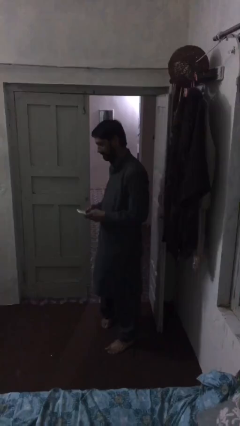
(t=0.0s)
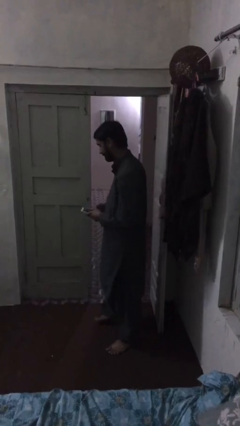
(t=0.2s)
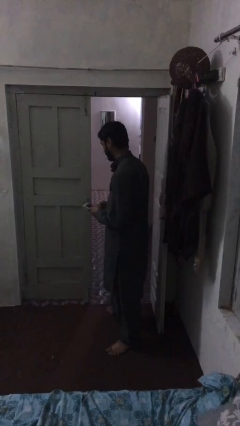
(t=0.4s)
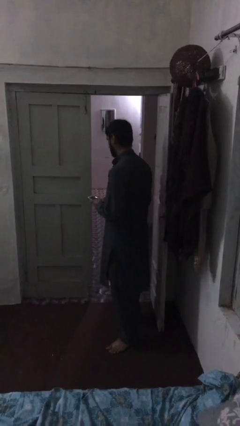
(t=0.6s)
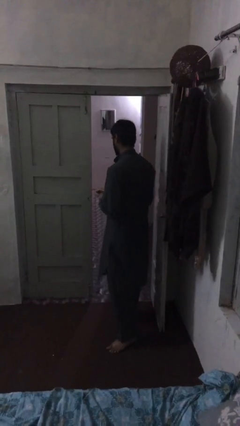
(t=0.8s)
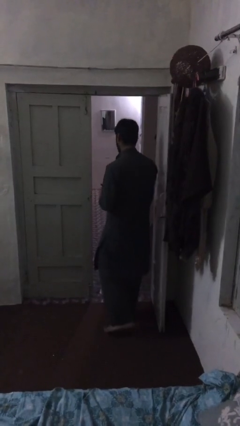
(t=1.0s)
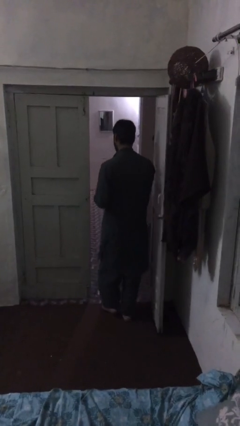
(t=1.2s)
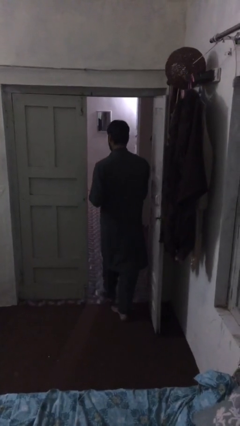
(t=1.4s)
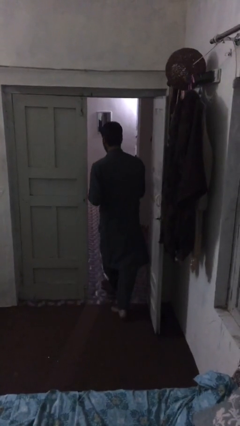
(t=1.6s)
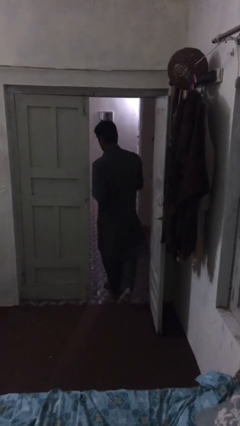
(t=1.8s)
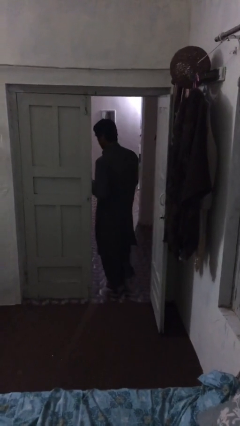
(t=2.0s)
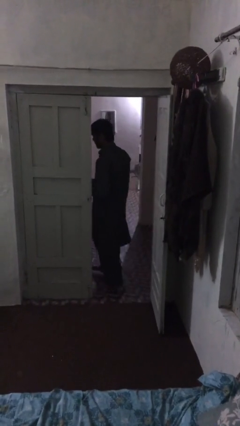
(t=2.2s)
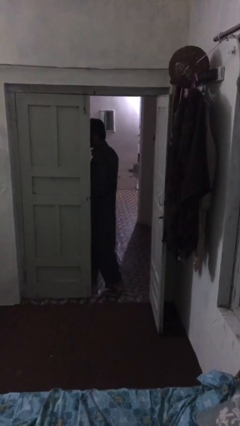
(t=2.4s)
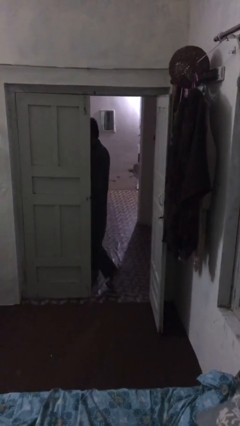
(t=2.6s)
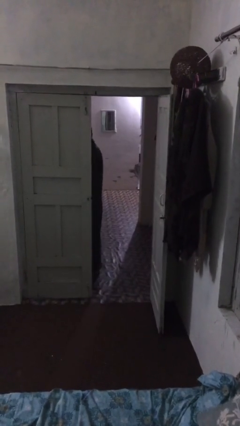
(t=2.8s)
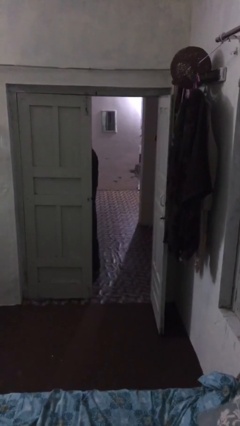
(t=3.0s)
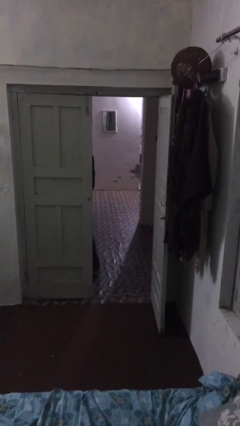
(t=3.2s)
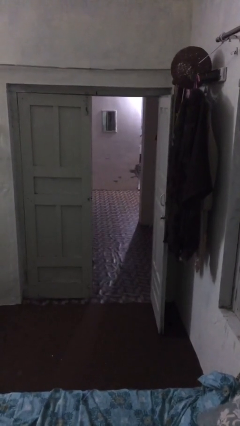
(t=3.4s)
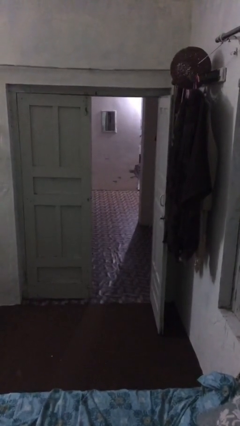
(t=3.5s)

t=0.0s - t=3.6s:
person exits scene through structure

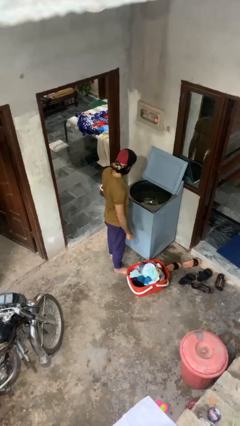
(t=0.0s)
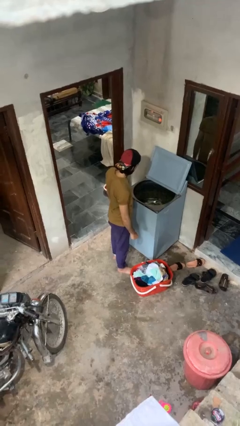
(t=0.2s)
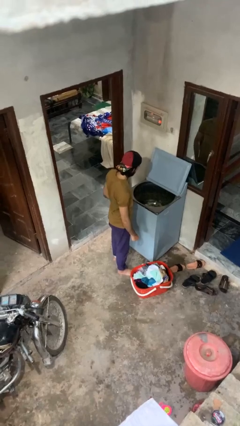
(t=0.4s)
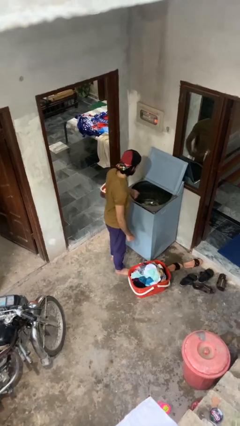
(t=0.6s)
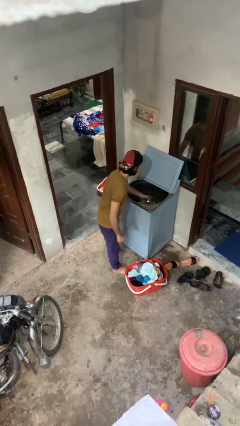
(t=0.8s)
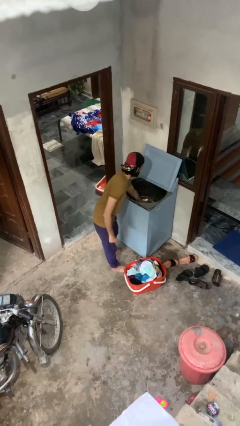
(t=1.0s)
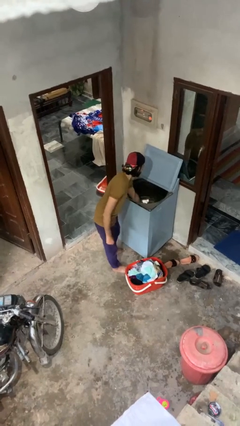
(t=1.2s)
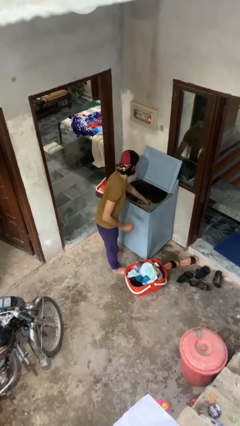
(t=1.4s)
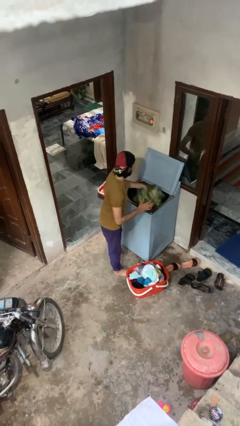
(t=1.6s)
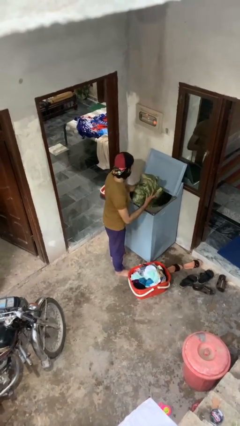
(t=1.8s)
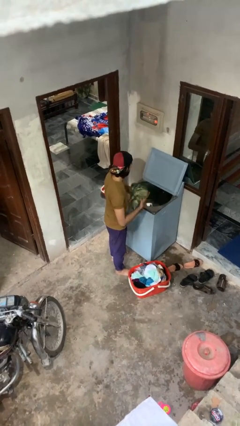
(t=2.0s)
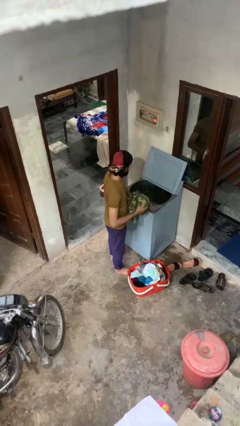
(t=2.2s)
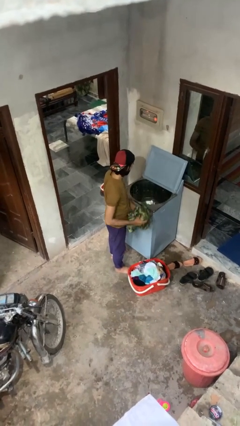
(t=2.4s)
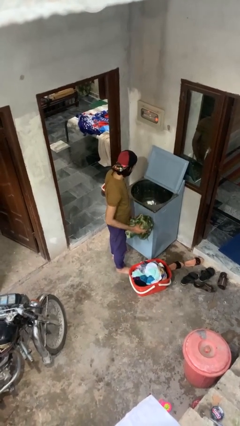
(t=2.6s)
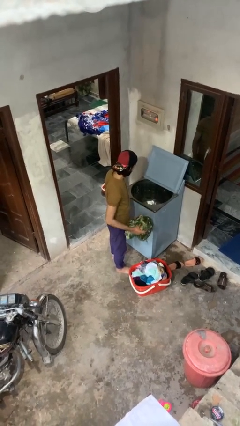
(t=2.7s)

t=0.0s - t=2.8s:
person unloads clotheswasher

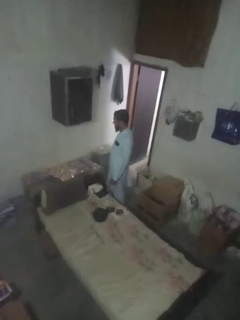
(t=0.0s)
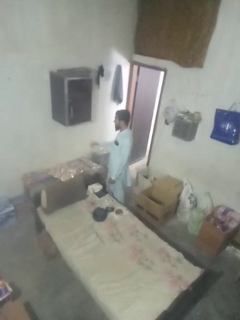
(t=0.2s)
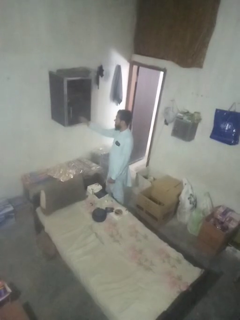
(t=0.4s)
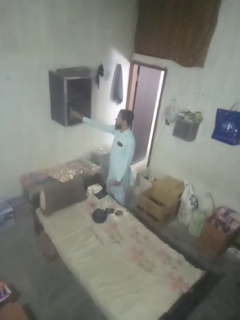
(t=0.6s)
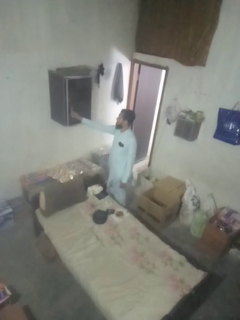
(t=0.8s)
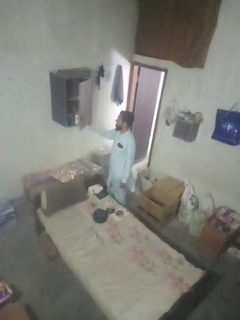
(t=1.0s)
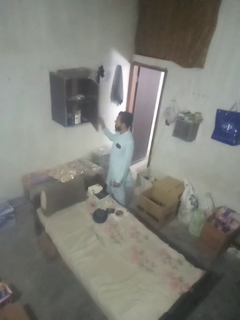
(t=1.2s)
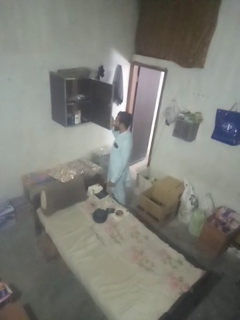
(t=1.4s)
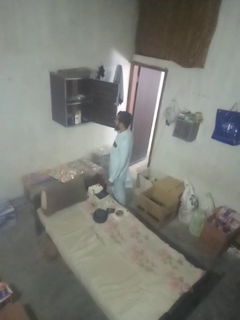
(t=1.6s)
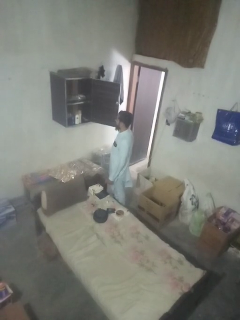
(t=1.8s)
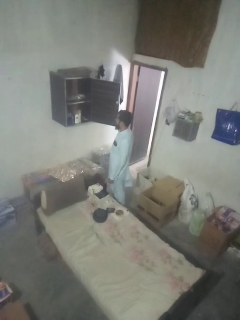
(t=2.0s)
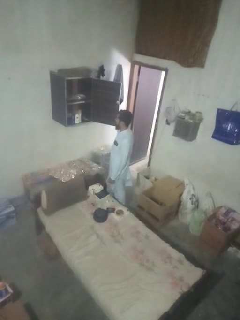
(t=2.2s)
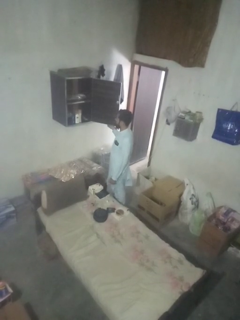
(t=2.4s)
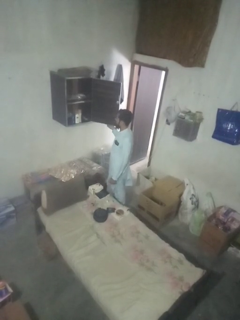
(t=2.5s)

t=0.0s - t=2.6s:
person opens dresser drawer

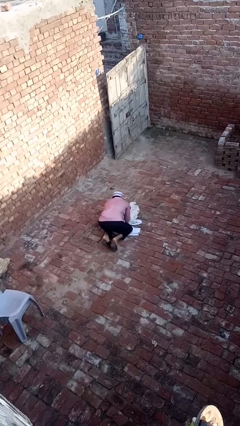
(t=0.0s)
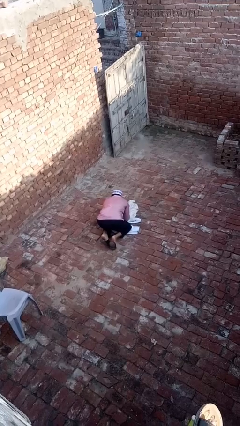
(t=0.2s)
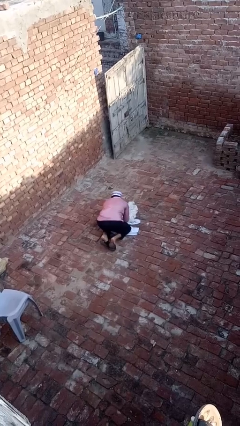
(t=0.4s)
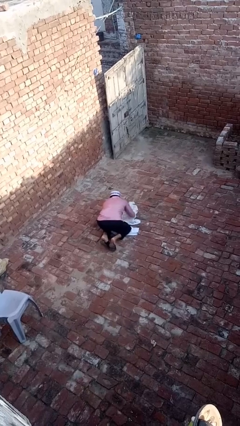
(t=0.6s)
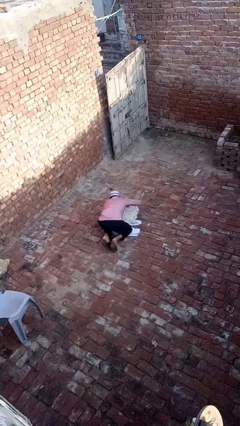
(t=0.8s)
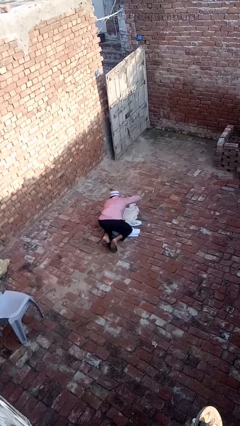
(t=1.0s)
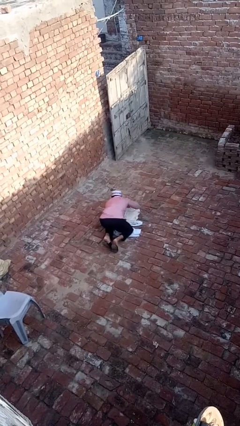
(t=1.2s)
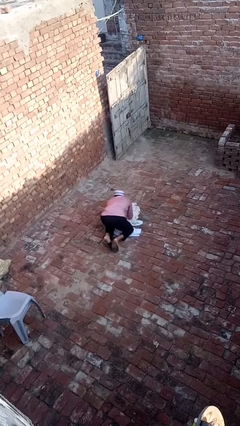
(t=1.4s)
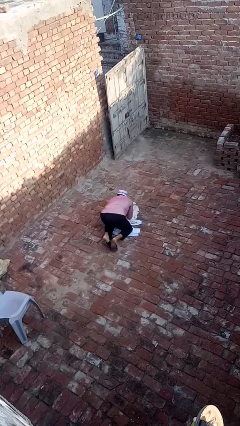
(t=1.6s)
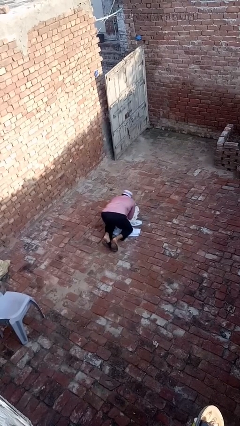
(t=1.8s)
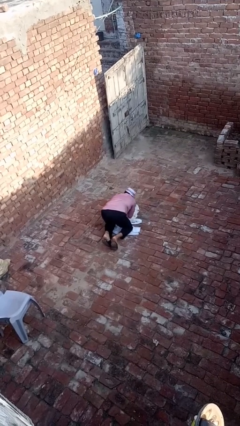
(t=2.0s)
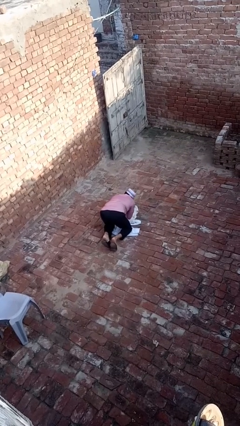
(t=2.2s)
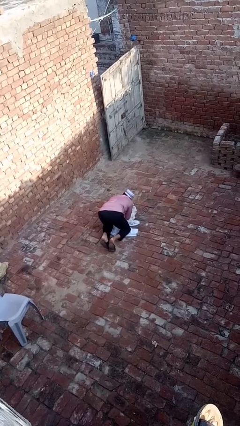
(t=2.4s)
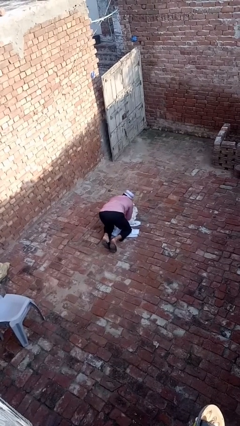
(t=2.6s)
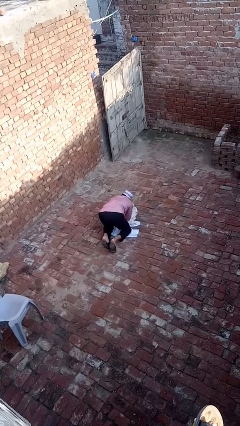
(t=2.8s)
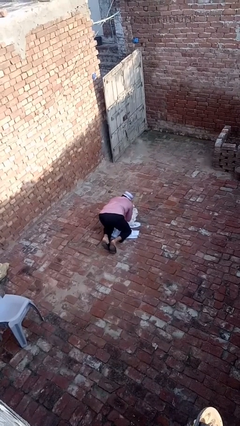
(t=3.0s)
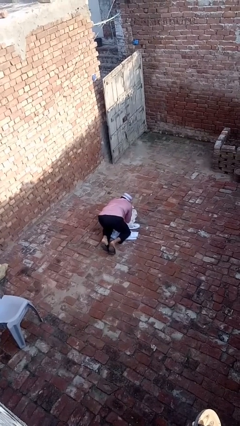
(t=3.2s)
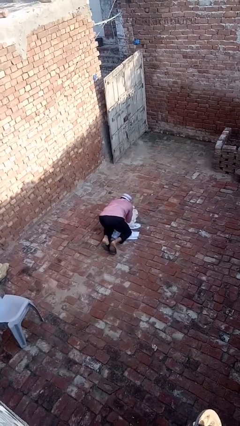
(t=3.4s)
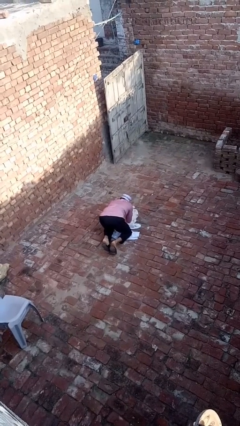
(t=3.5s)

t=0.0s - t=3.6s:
person crawls

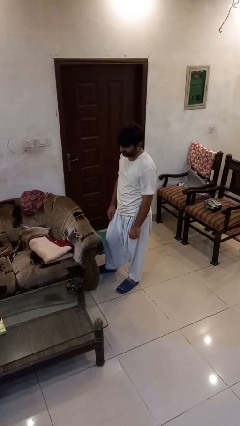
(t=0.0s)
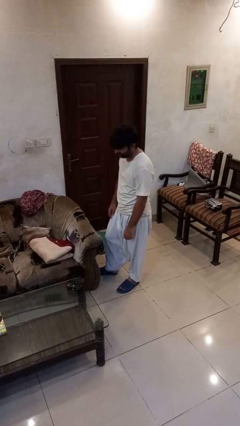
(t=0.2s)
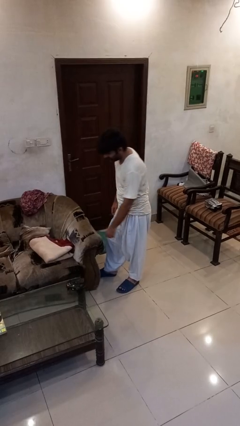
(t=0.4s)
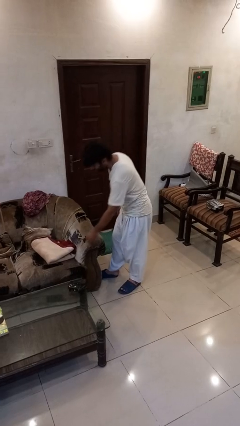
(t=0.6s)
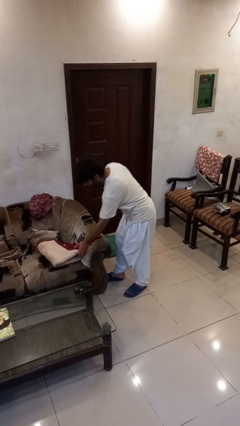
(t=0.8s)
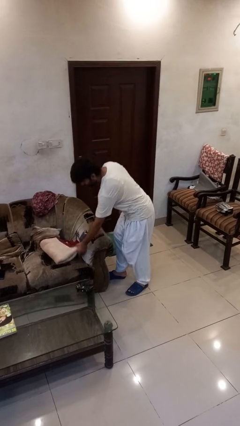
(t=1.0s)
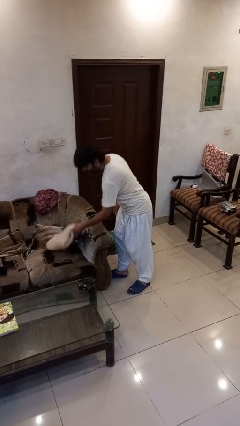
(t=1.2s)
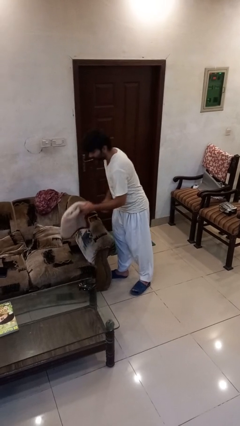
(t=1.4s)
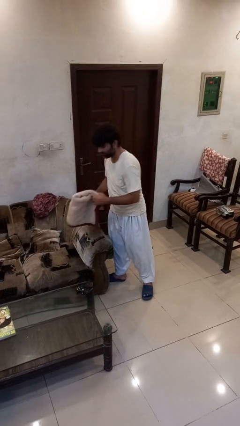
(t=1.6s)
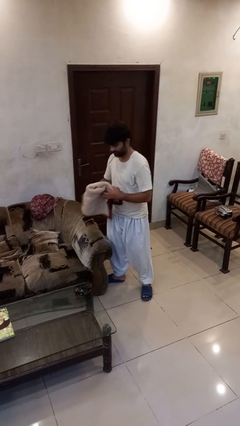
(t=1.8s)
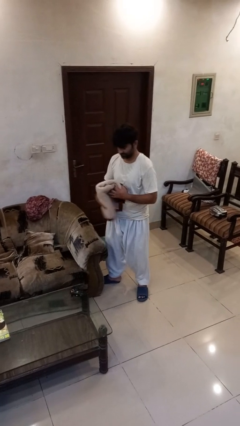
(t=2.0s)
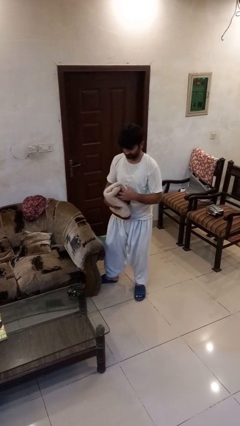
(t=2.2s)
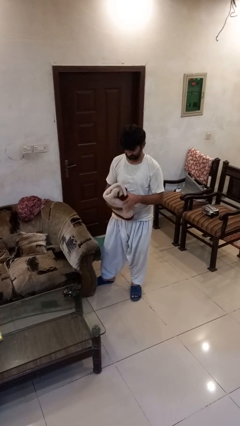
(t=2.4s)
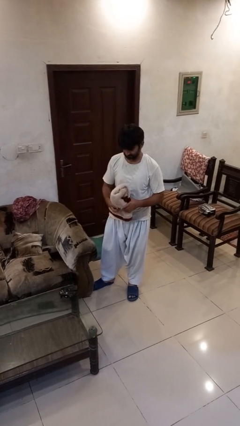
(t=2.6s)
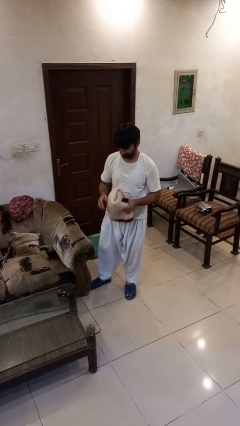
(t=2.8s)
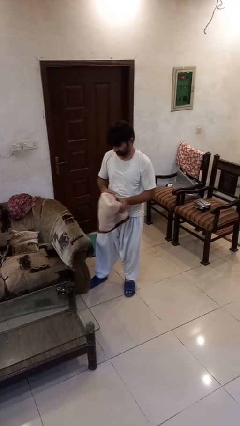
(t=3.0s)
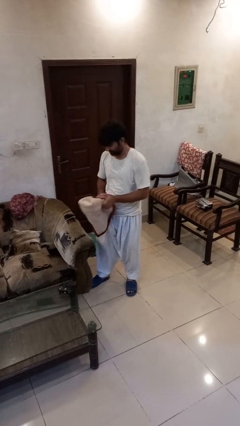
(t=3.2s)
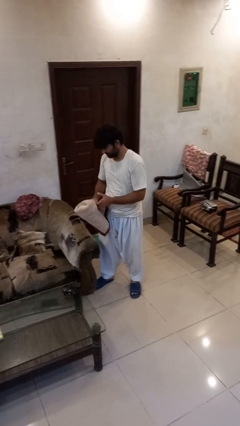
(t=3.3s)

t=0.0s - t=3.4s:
person picks up object from couch

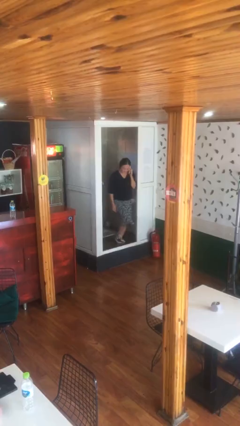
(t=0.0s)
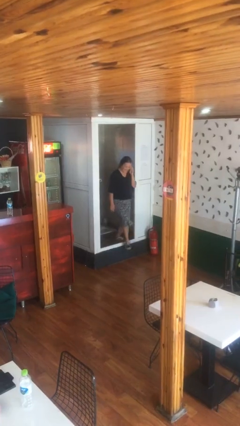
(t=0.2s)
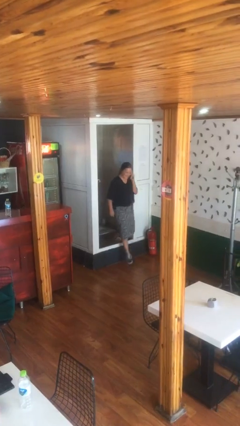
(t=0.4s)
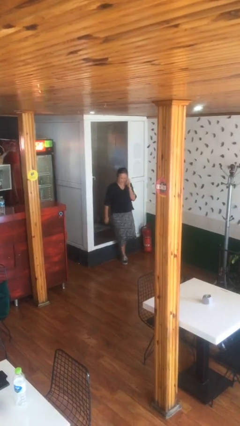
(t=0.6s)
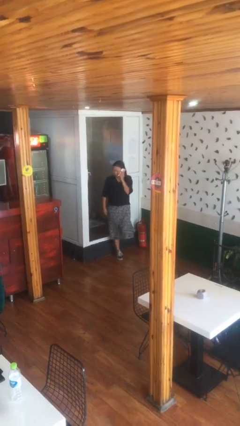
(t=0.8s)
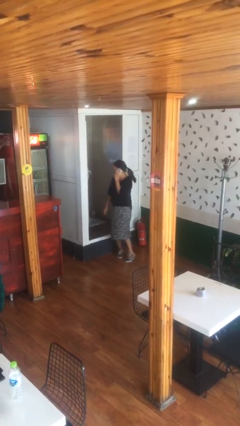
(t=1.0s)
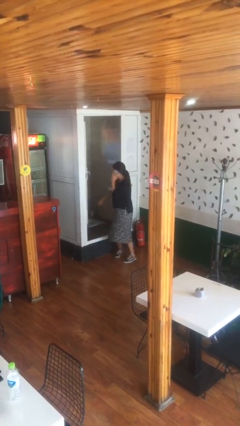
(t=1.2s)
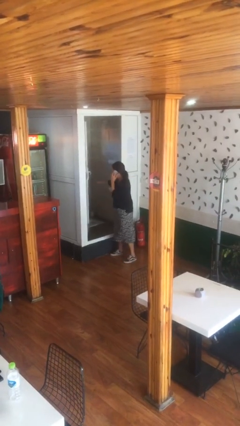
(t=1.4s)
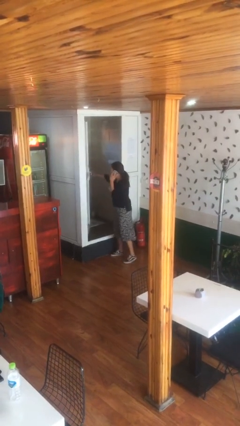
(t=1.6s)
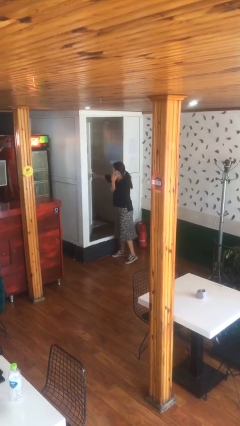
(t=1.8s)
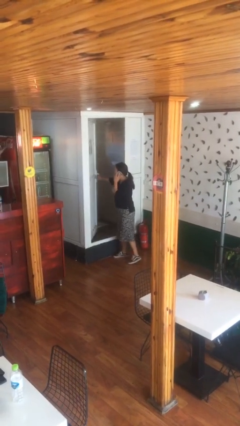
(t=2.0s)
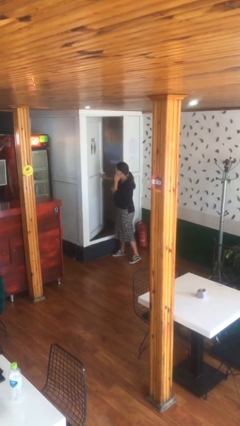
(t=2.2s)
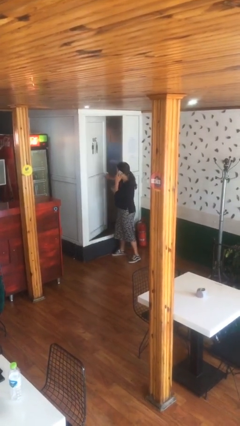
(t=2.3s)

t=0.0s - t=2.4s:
person enters scene through structure
